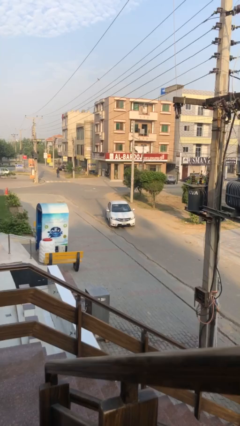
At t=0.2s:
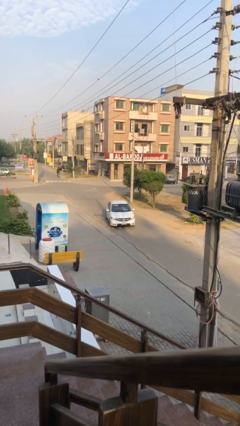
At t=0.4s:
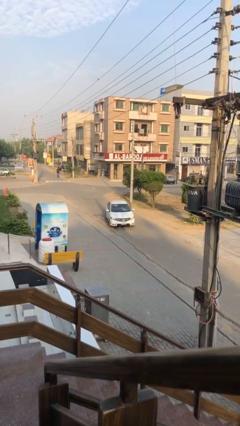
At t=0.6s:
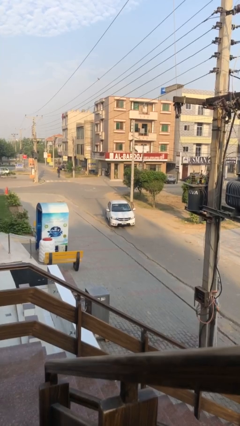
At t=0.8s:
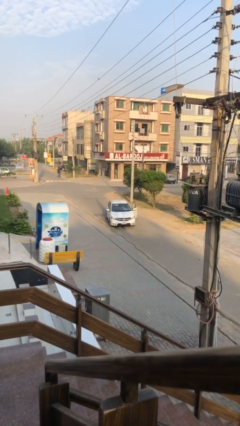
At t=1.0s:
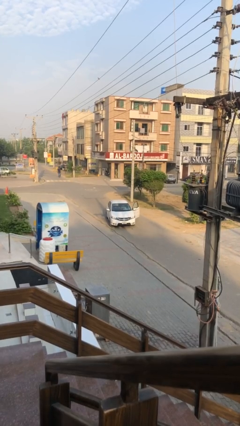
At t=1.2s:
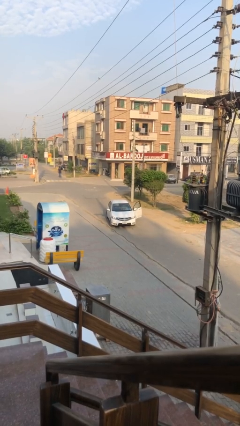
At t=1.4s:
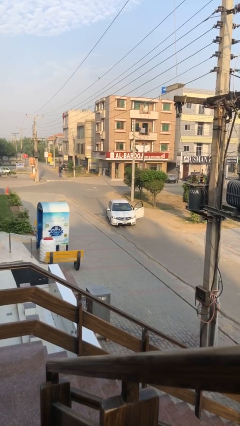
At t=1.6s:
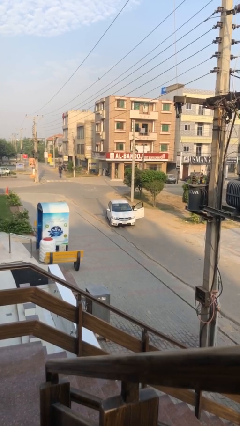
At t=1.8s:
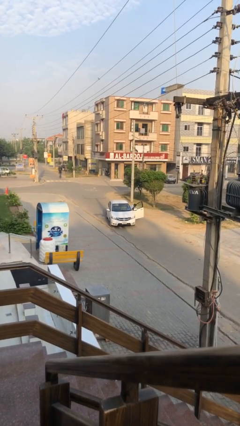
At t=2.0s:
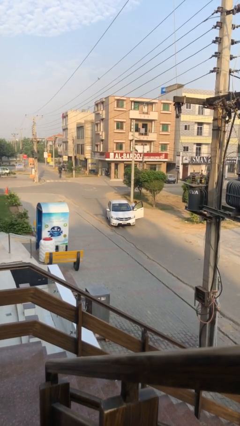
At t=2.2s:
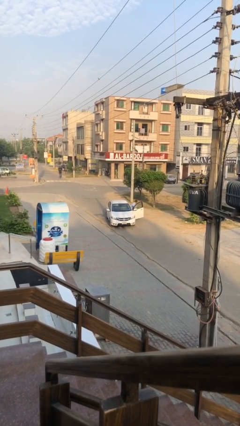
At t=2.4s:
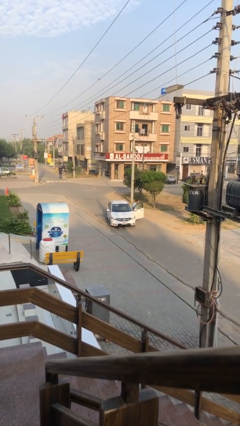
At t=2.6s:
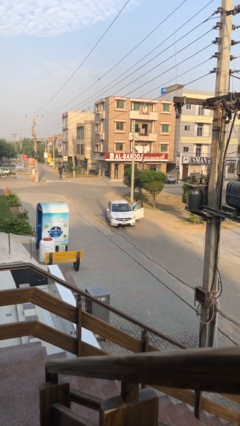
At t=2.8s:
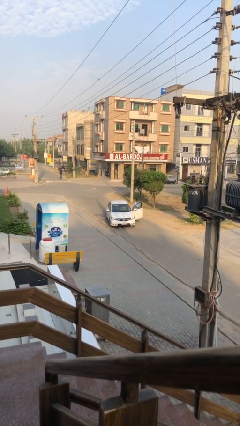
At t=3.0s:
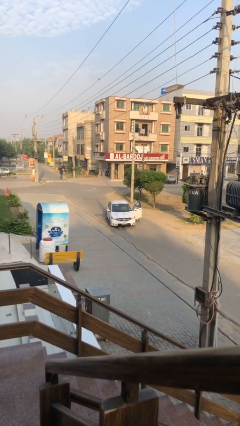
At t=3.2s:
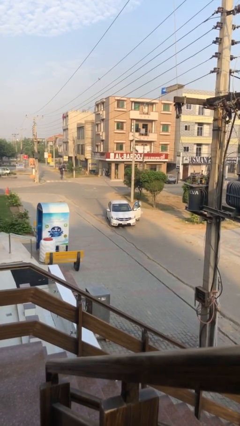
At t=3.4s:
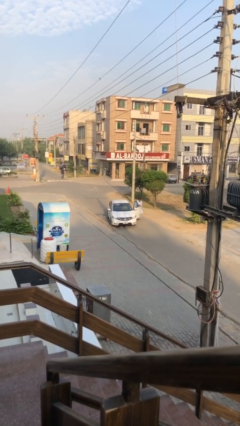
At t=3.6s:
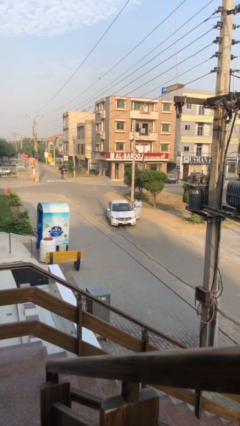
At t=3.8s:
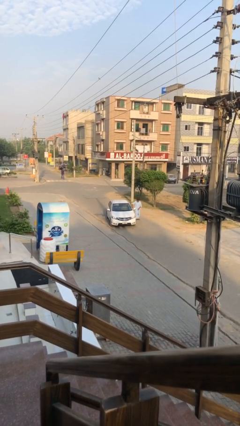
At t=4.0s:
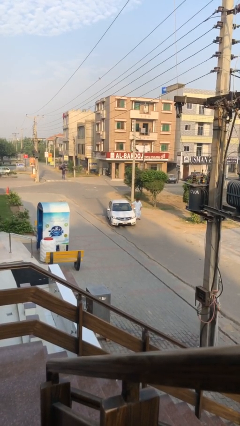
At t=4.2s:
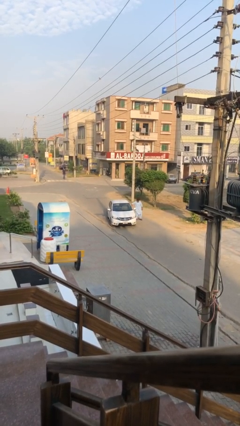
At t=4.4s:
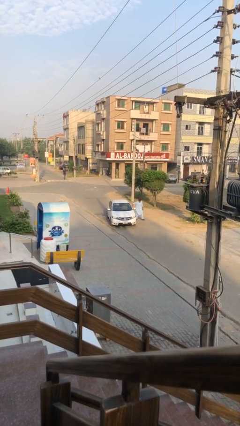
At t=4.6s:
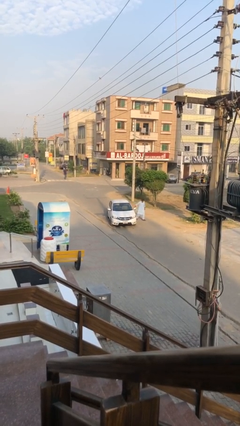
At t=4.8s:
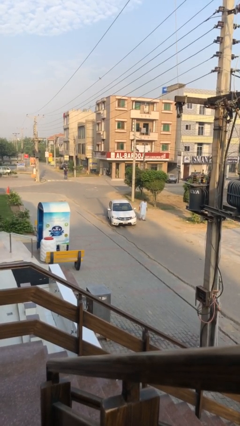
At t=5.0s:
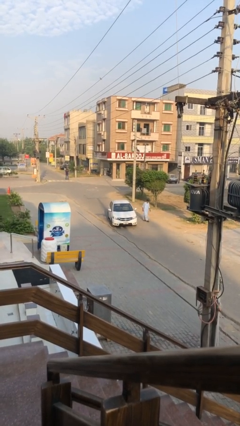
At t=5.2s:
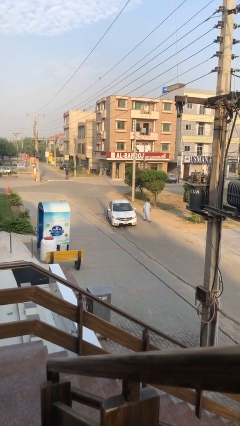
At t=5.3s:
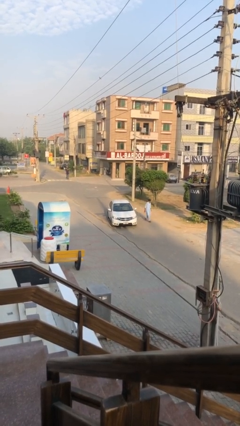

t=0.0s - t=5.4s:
car drops off person

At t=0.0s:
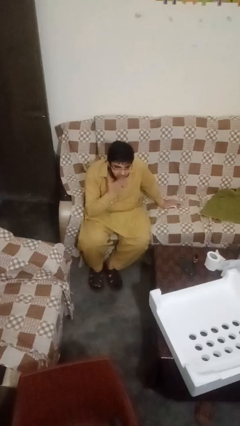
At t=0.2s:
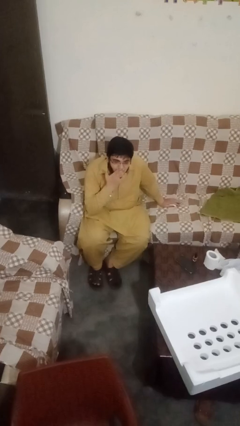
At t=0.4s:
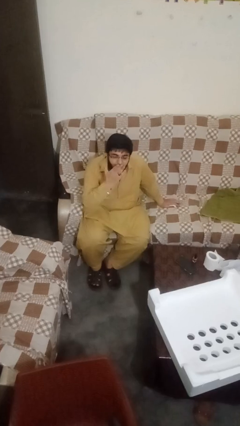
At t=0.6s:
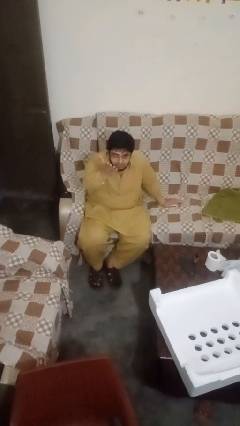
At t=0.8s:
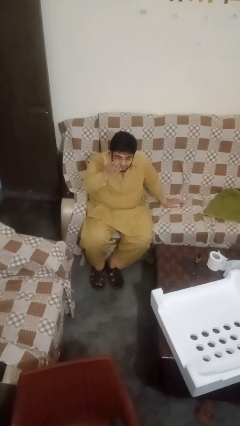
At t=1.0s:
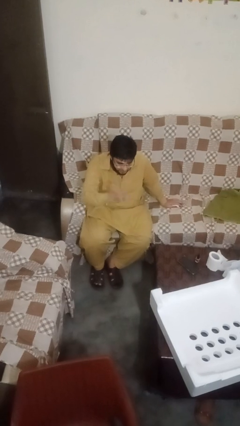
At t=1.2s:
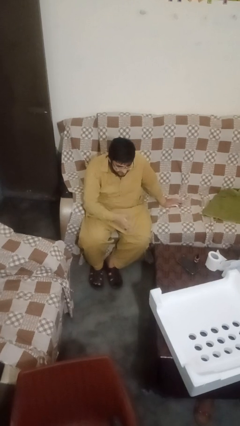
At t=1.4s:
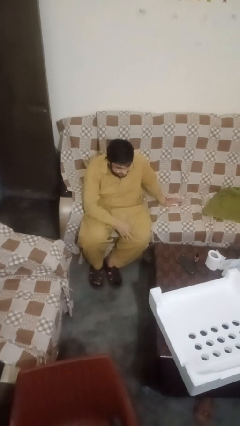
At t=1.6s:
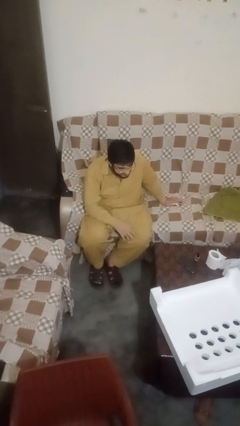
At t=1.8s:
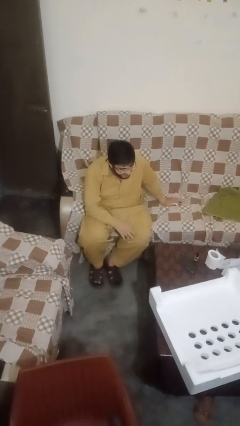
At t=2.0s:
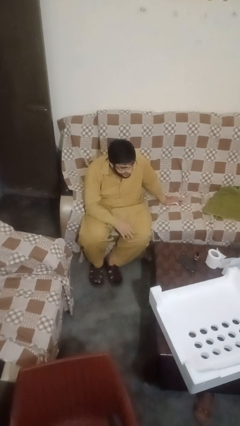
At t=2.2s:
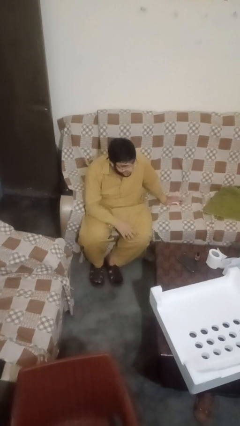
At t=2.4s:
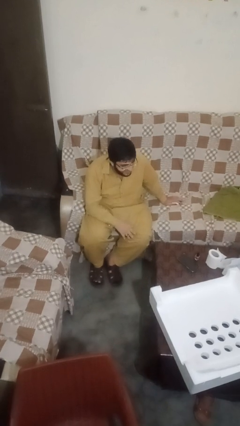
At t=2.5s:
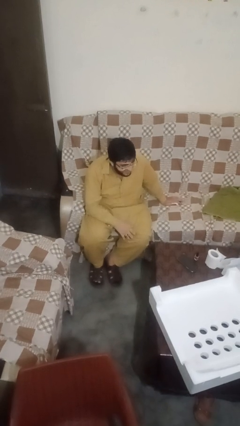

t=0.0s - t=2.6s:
person gestures blow kiss

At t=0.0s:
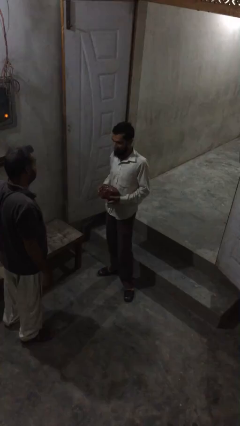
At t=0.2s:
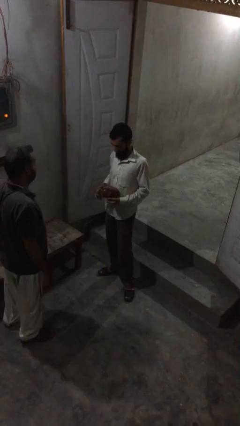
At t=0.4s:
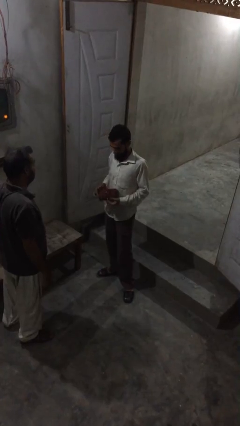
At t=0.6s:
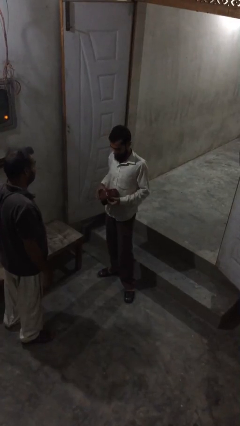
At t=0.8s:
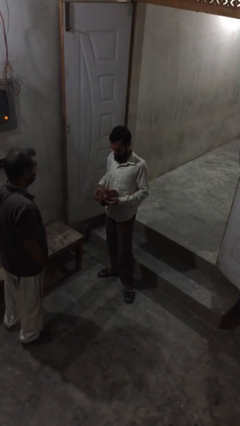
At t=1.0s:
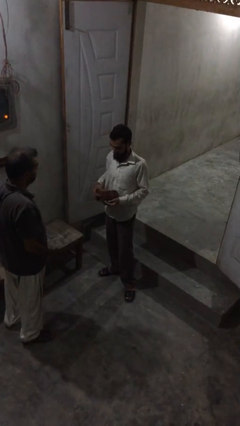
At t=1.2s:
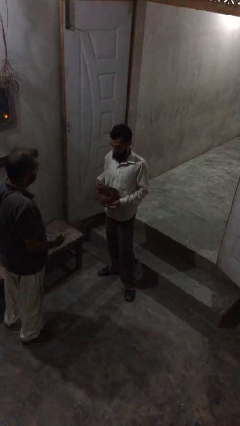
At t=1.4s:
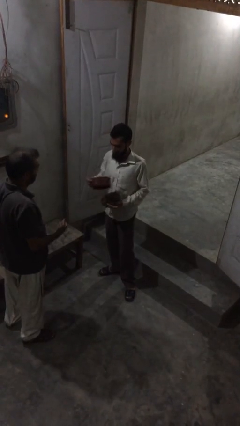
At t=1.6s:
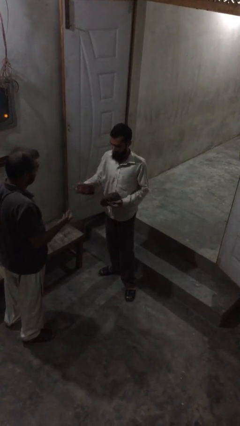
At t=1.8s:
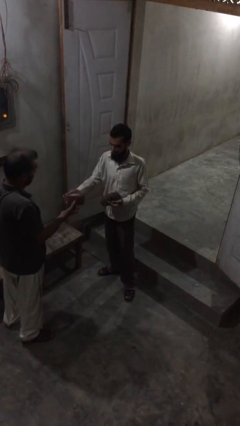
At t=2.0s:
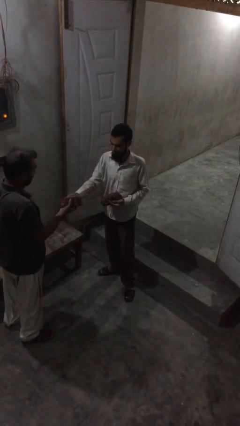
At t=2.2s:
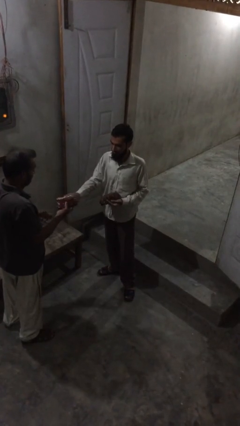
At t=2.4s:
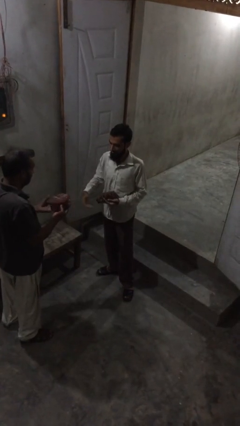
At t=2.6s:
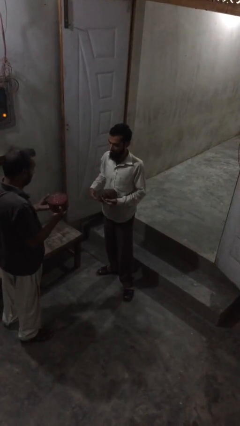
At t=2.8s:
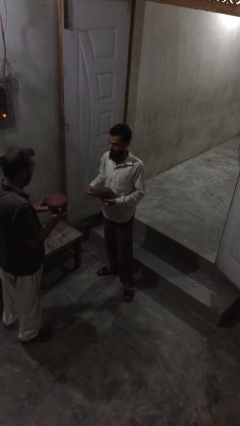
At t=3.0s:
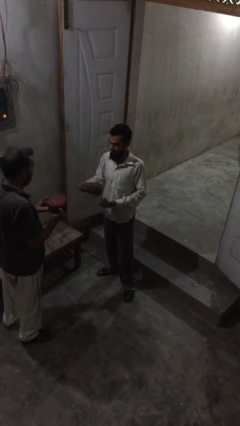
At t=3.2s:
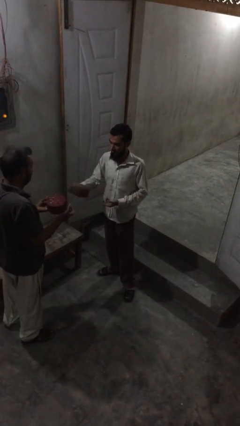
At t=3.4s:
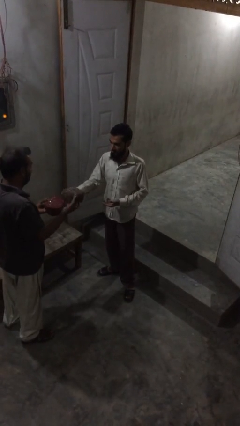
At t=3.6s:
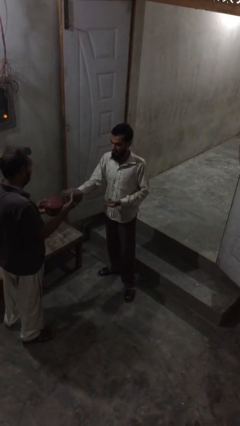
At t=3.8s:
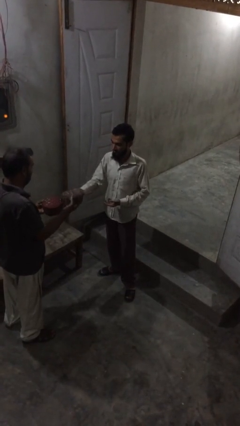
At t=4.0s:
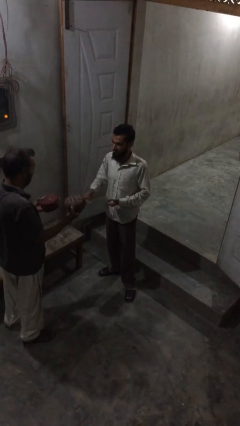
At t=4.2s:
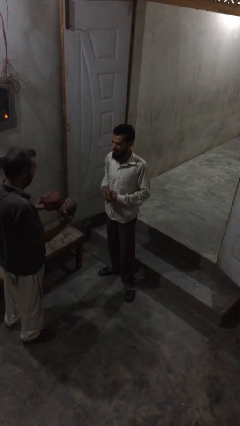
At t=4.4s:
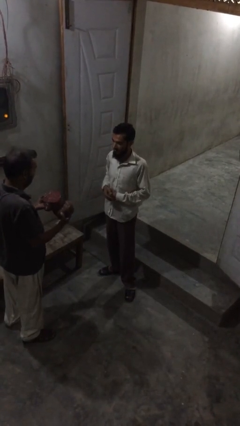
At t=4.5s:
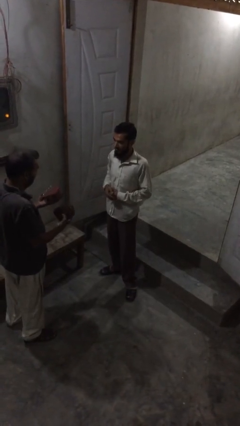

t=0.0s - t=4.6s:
person transfers object to person

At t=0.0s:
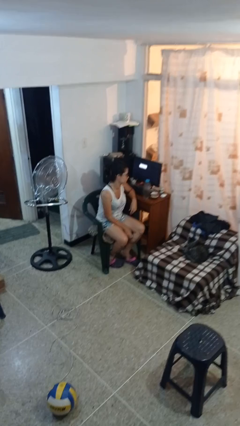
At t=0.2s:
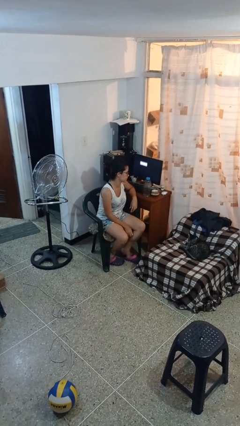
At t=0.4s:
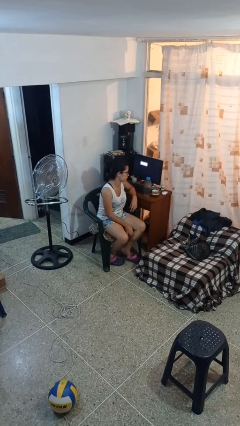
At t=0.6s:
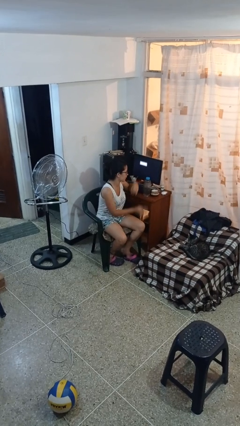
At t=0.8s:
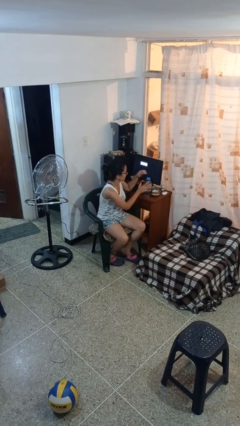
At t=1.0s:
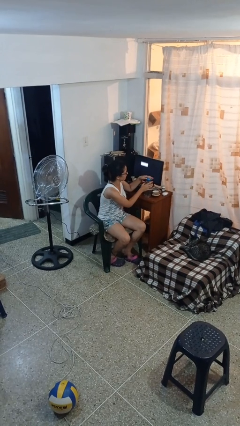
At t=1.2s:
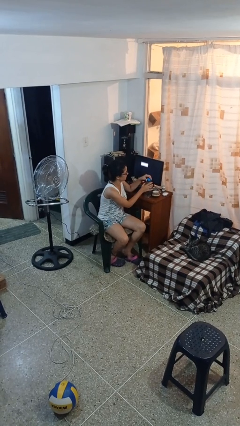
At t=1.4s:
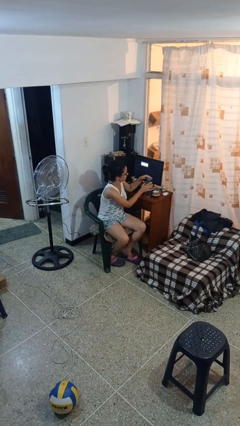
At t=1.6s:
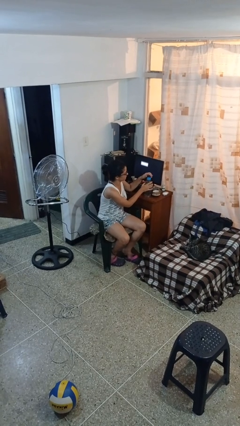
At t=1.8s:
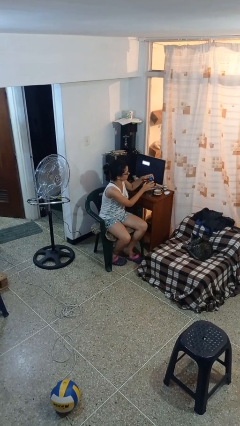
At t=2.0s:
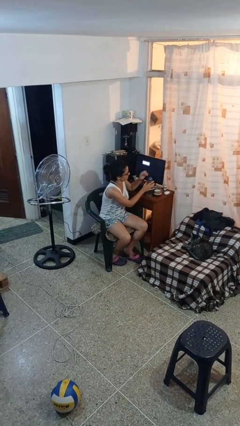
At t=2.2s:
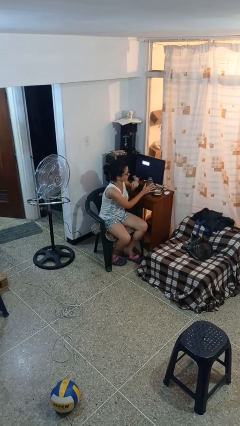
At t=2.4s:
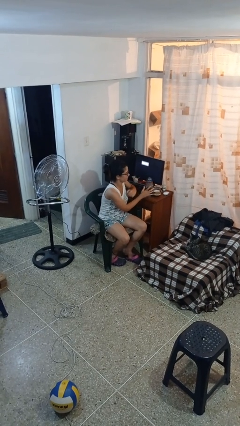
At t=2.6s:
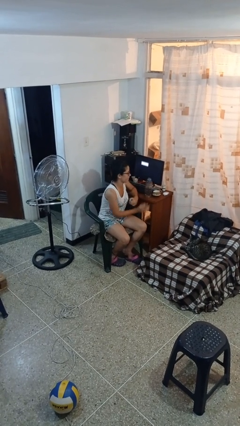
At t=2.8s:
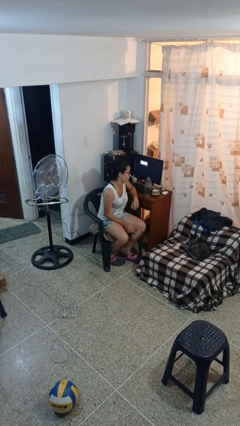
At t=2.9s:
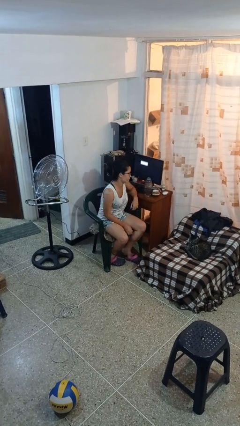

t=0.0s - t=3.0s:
person unscrews lid from bottle

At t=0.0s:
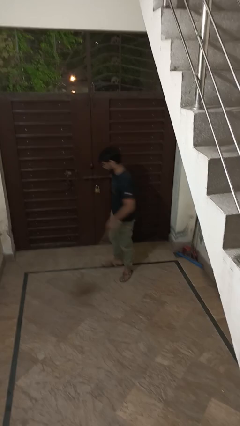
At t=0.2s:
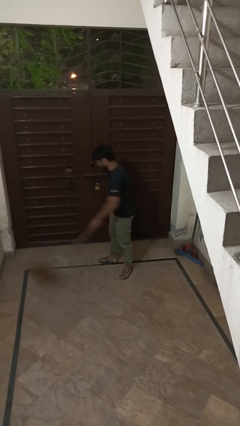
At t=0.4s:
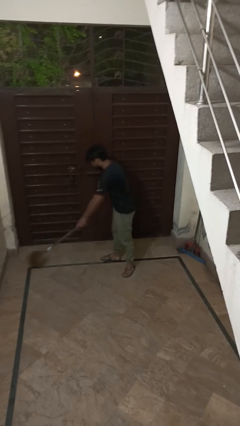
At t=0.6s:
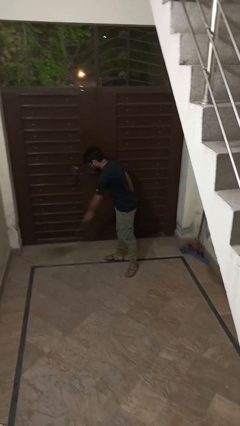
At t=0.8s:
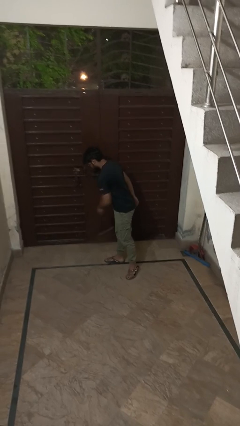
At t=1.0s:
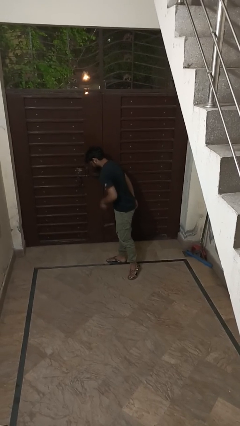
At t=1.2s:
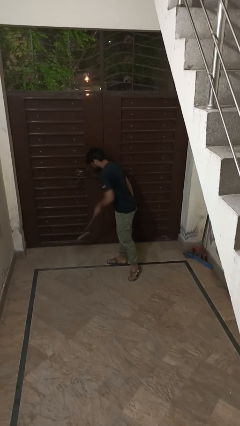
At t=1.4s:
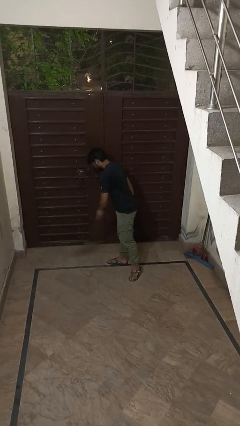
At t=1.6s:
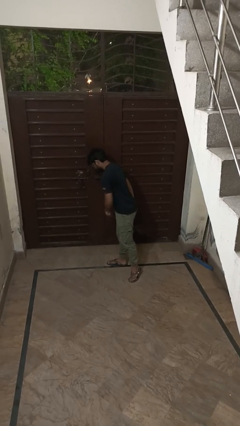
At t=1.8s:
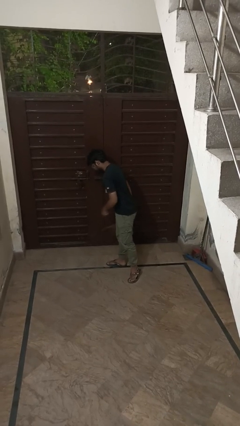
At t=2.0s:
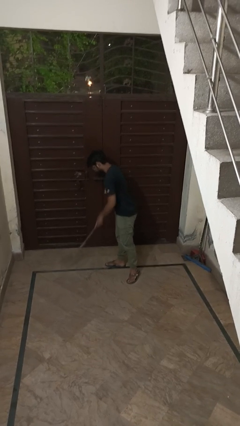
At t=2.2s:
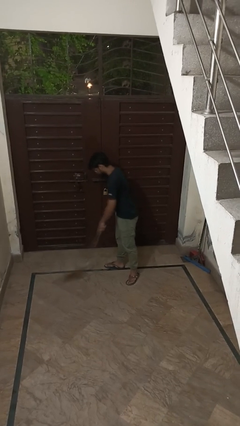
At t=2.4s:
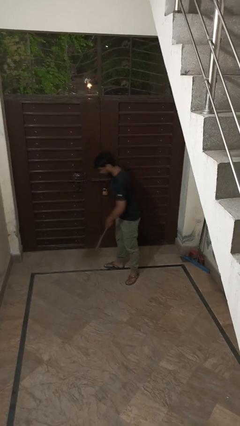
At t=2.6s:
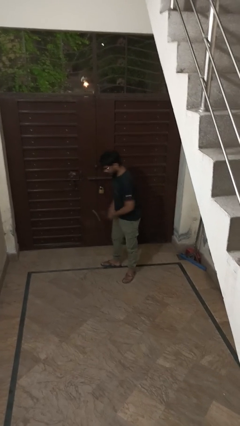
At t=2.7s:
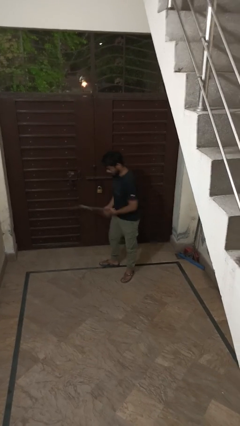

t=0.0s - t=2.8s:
person sweeps floor
